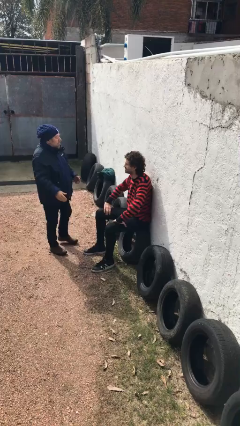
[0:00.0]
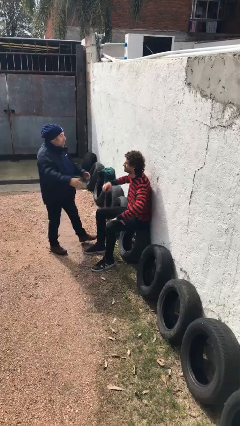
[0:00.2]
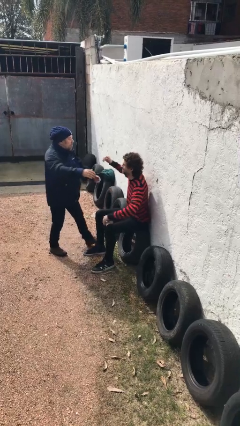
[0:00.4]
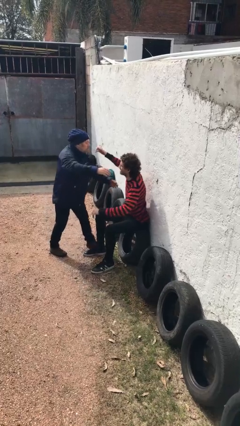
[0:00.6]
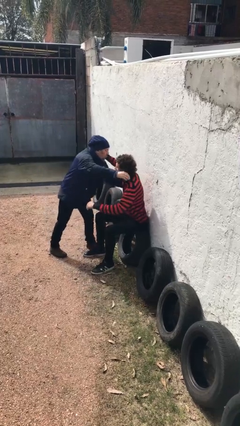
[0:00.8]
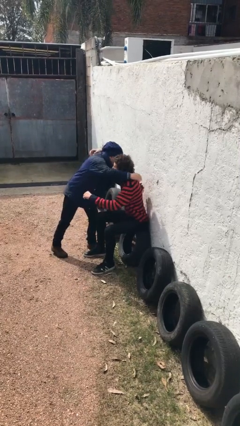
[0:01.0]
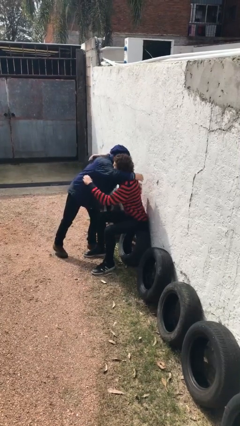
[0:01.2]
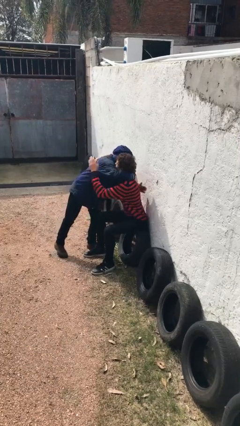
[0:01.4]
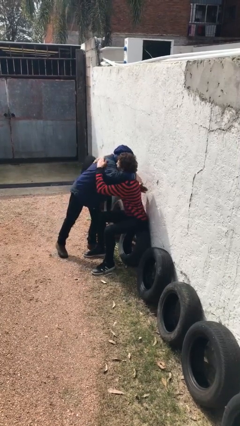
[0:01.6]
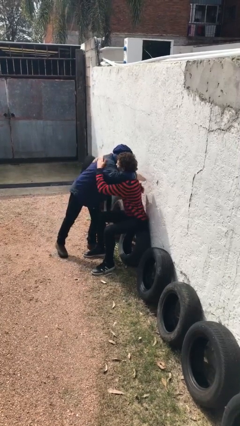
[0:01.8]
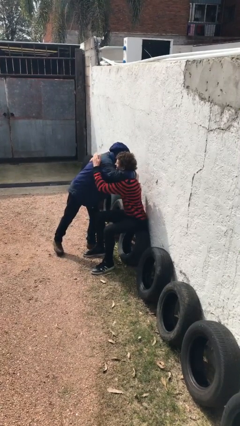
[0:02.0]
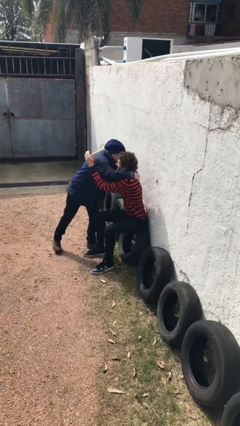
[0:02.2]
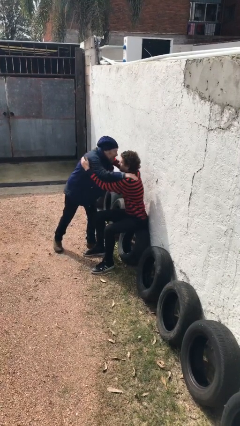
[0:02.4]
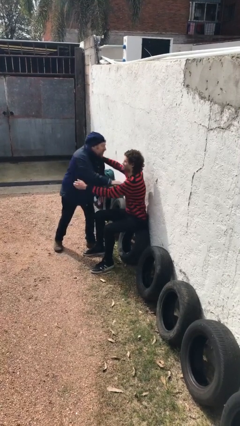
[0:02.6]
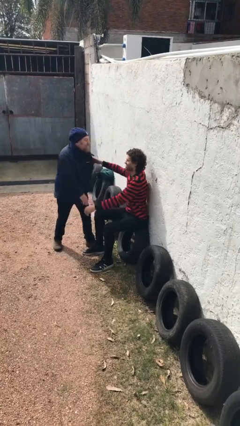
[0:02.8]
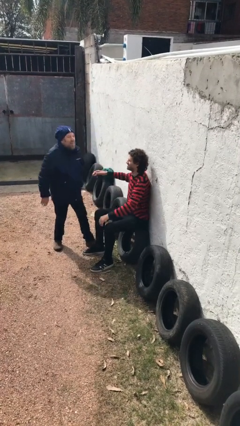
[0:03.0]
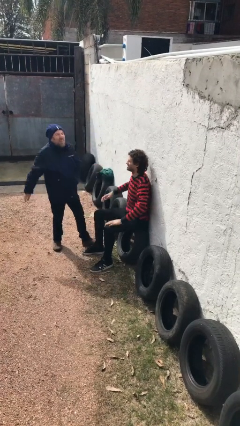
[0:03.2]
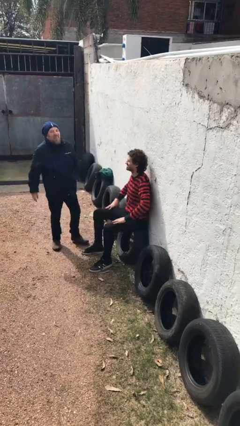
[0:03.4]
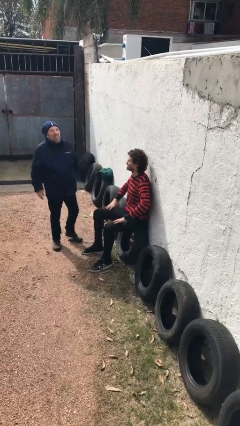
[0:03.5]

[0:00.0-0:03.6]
person embraces person

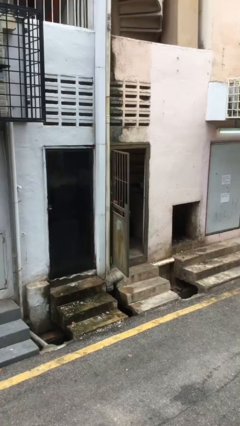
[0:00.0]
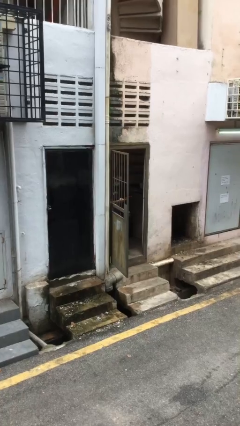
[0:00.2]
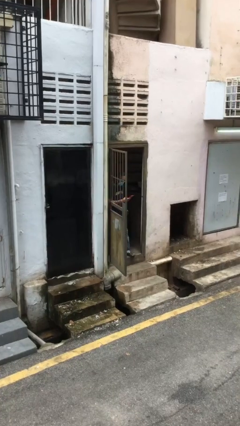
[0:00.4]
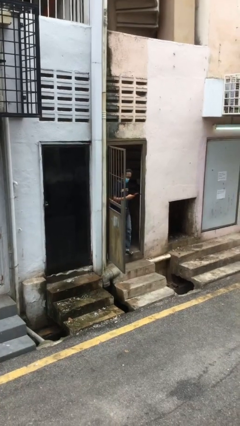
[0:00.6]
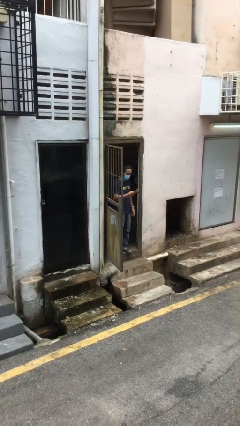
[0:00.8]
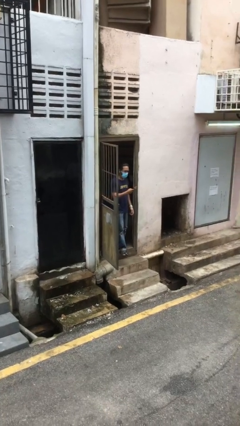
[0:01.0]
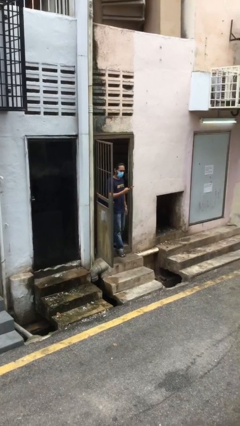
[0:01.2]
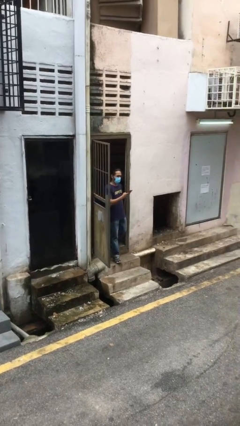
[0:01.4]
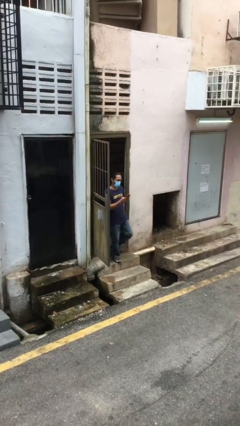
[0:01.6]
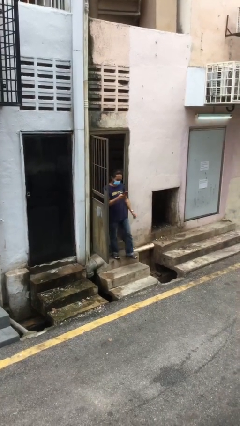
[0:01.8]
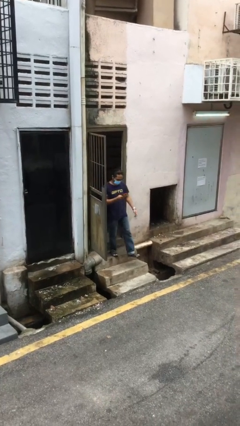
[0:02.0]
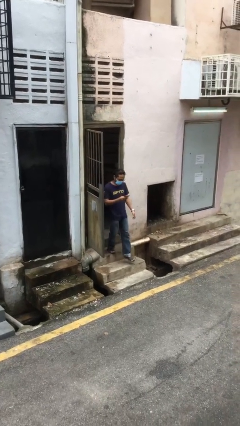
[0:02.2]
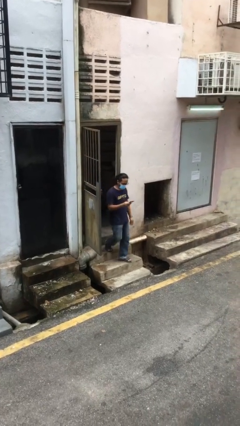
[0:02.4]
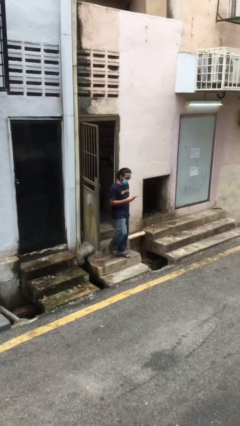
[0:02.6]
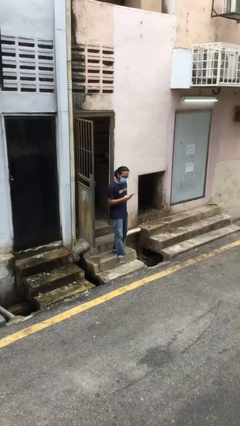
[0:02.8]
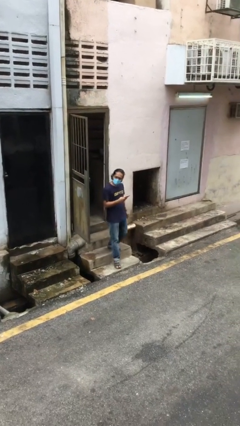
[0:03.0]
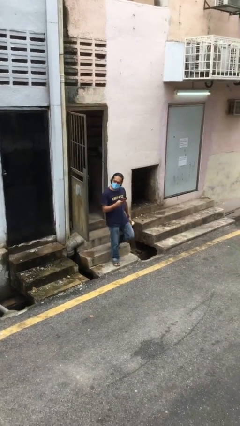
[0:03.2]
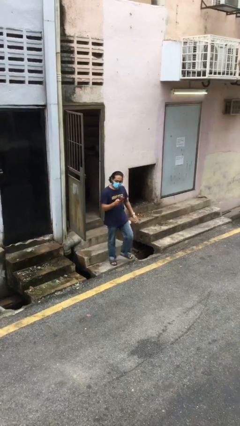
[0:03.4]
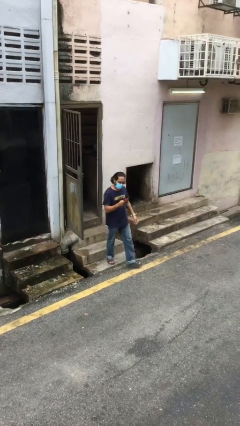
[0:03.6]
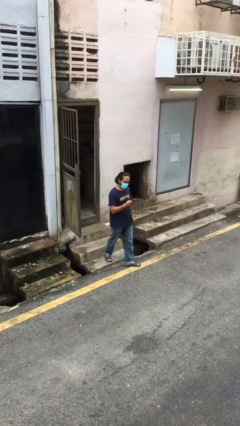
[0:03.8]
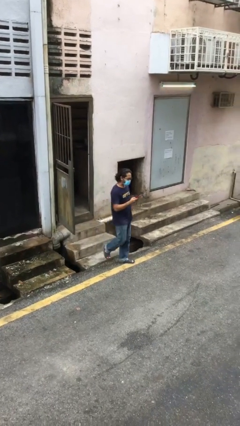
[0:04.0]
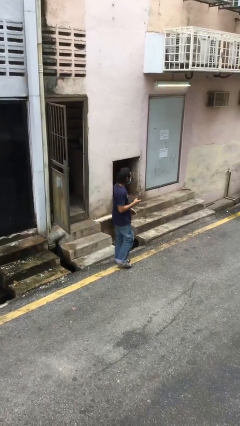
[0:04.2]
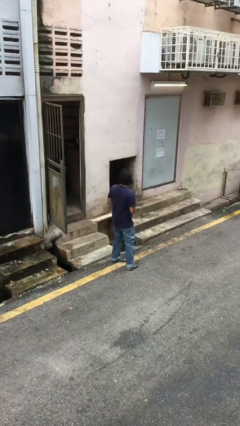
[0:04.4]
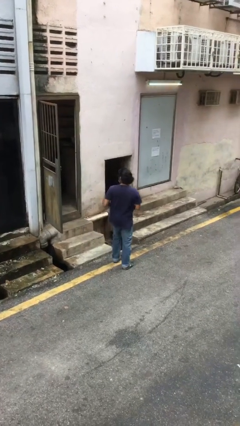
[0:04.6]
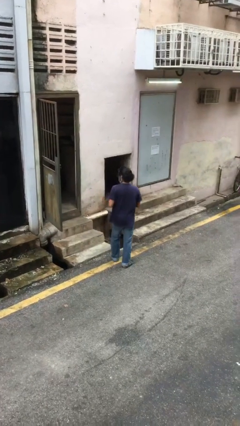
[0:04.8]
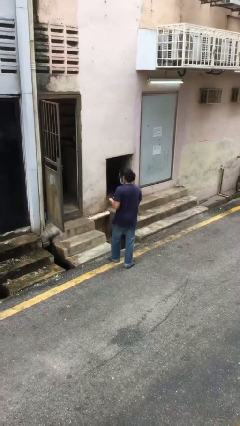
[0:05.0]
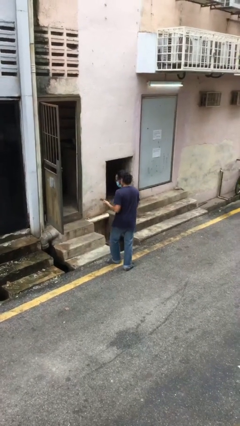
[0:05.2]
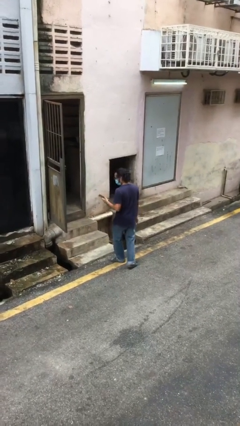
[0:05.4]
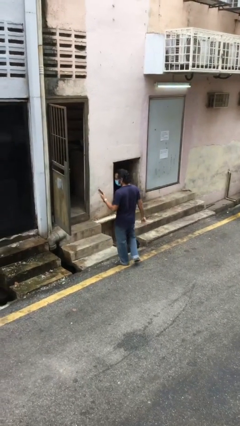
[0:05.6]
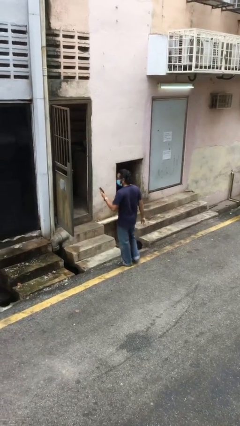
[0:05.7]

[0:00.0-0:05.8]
person enters scene through structure

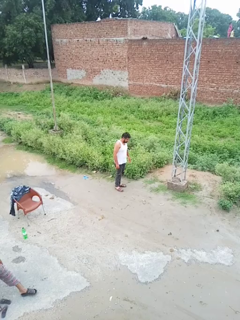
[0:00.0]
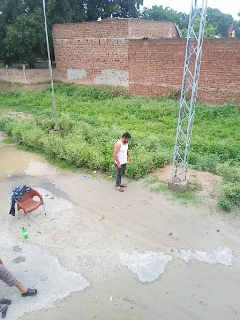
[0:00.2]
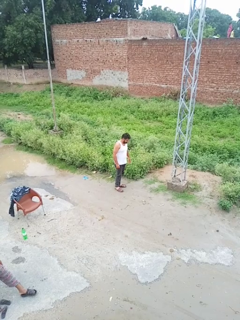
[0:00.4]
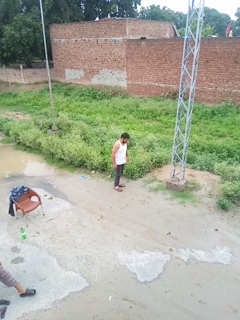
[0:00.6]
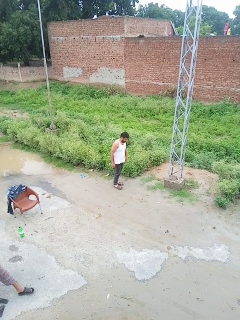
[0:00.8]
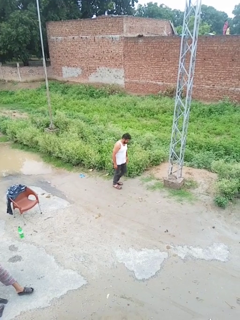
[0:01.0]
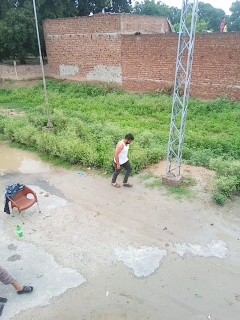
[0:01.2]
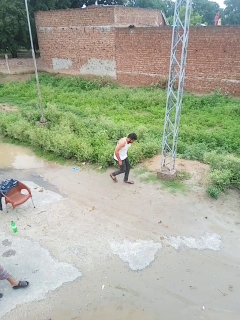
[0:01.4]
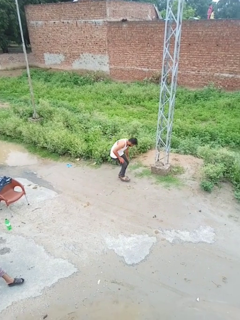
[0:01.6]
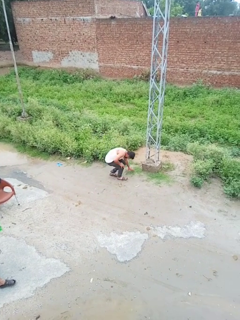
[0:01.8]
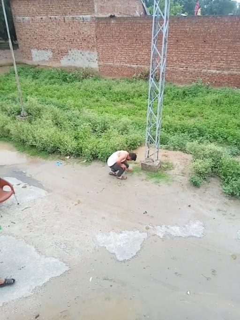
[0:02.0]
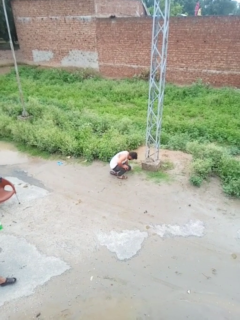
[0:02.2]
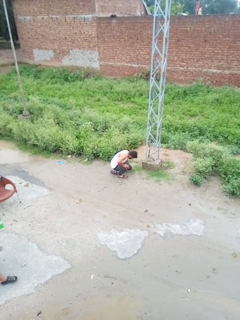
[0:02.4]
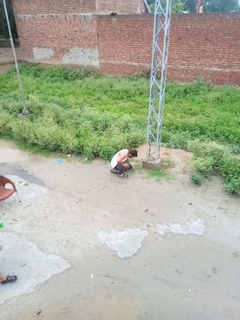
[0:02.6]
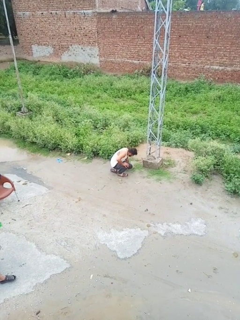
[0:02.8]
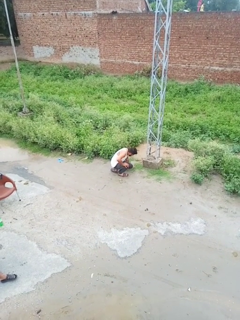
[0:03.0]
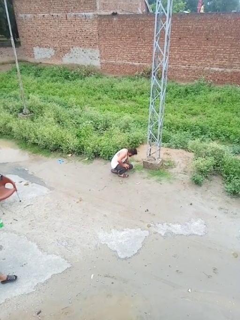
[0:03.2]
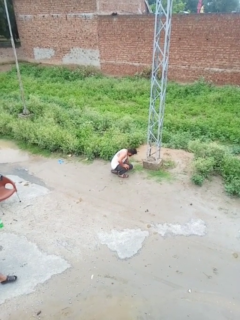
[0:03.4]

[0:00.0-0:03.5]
person trips on object on floor

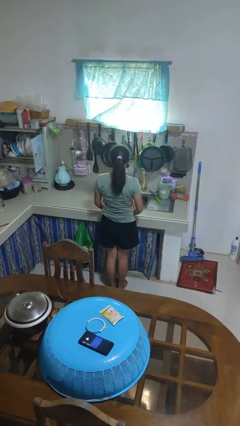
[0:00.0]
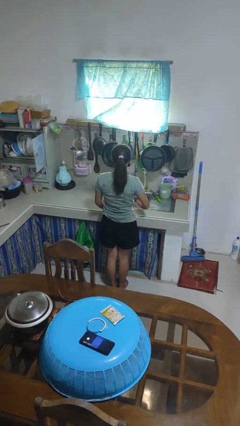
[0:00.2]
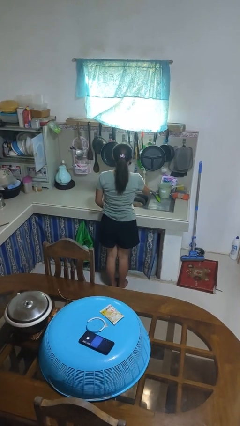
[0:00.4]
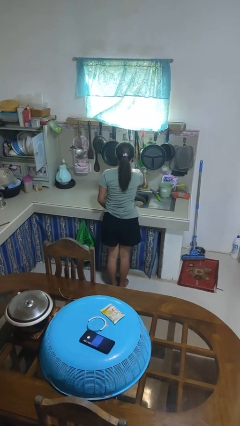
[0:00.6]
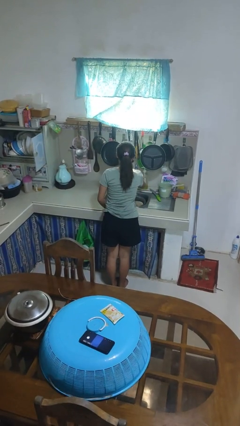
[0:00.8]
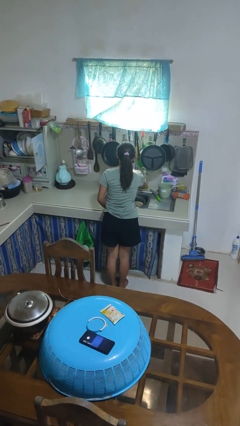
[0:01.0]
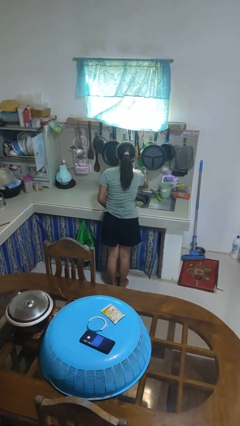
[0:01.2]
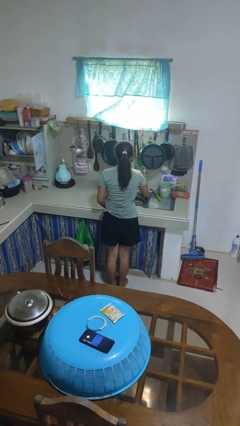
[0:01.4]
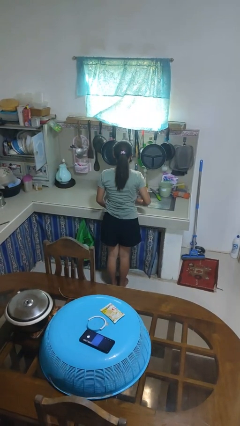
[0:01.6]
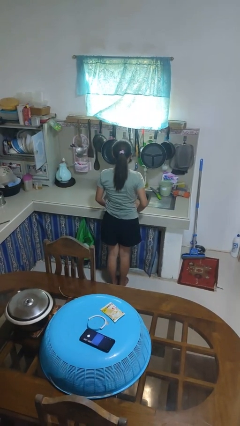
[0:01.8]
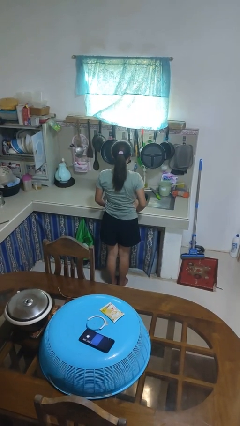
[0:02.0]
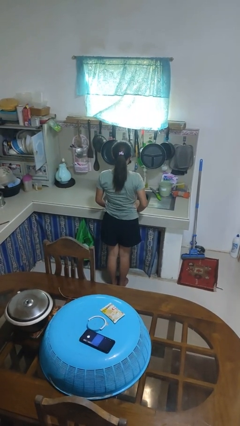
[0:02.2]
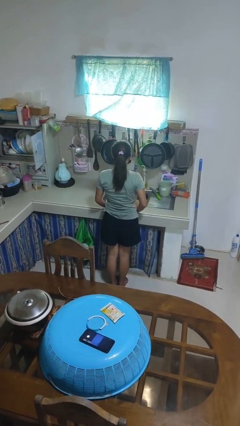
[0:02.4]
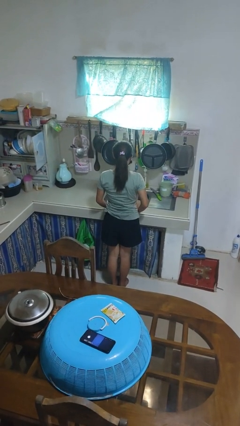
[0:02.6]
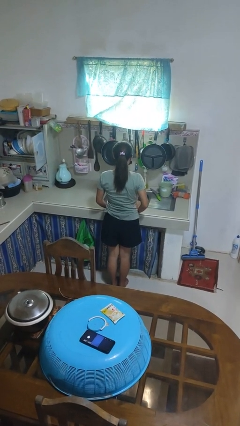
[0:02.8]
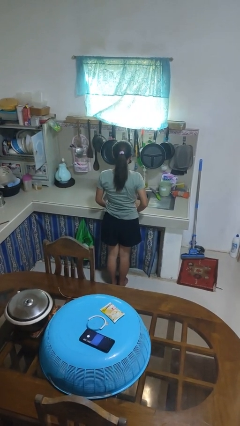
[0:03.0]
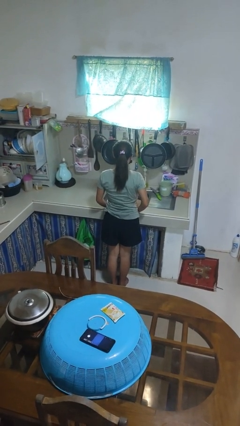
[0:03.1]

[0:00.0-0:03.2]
person turns on faucet

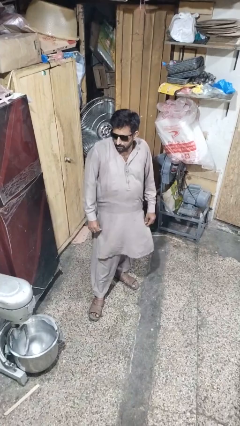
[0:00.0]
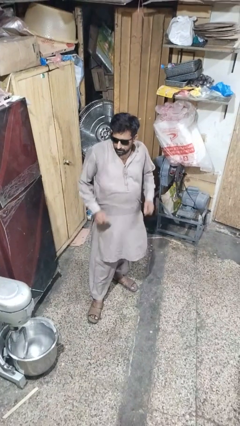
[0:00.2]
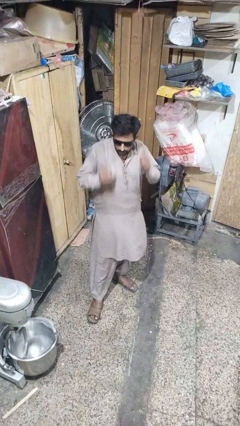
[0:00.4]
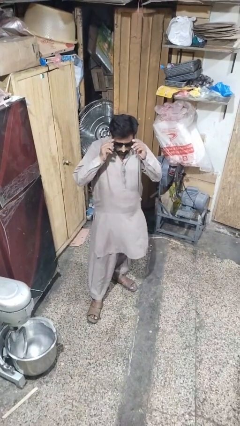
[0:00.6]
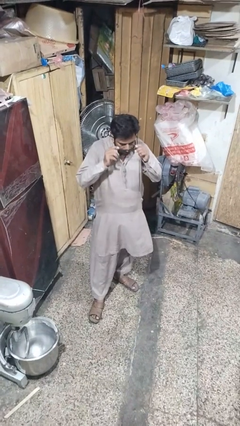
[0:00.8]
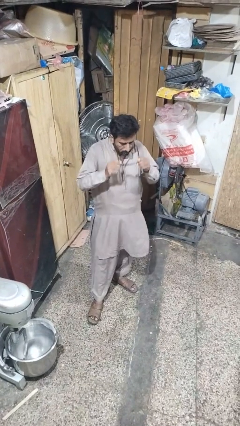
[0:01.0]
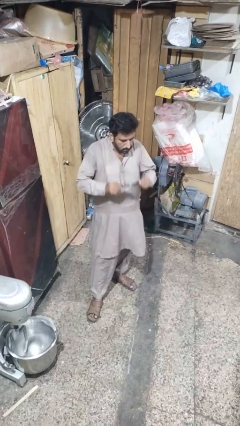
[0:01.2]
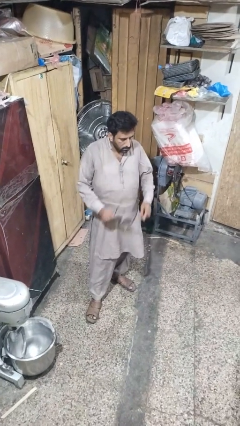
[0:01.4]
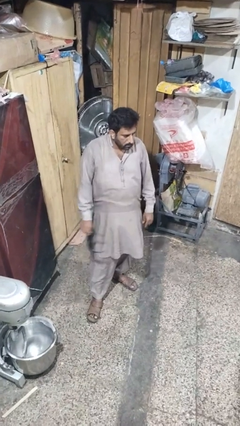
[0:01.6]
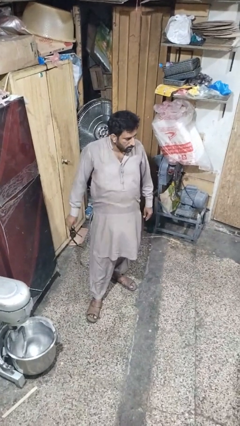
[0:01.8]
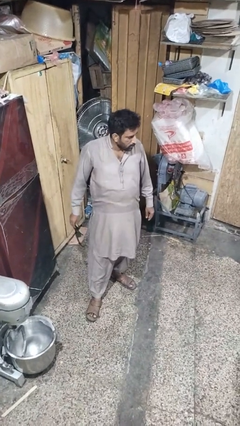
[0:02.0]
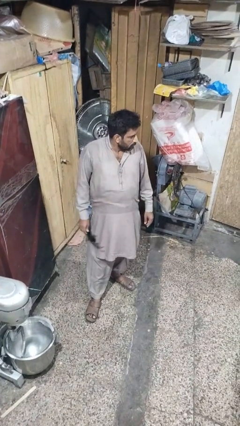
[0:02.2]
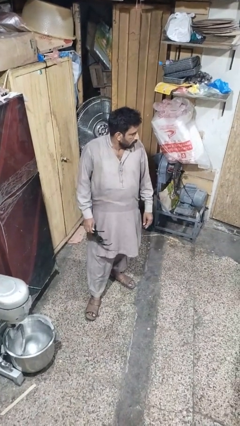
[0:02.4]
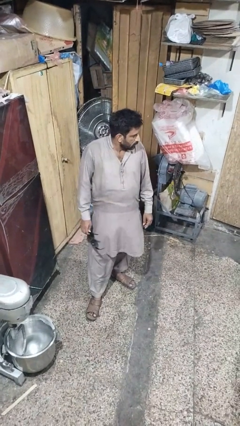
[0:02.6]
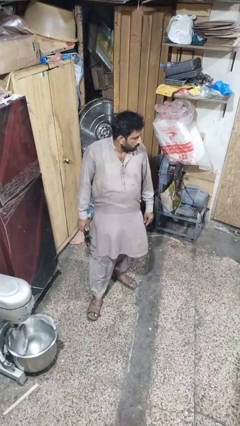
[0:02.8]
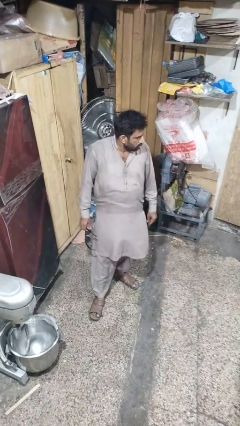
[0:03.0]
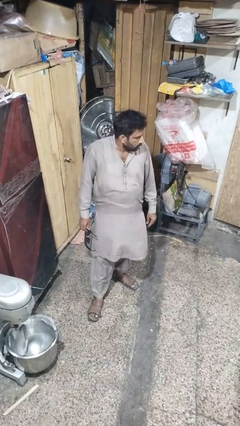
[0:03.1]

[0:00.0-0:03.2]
person takes off sunglasses
